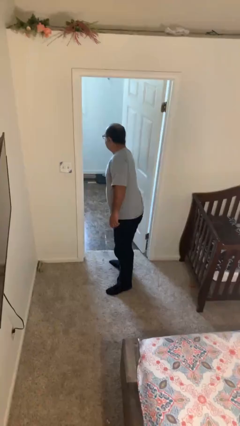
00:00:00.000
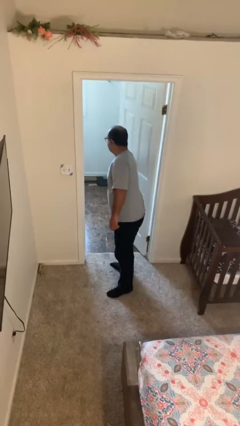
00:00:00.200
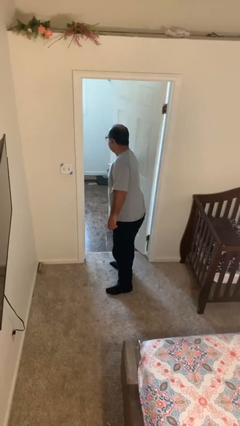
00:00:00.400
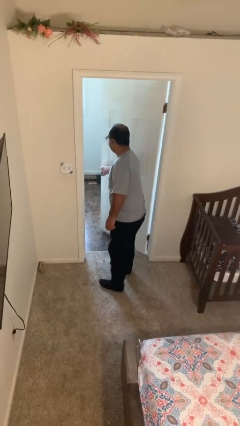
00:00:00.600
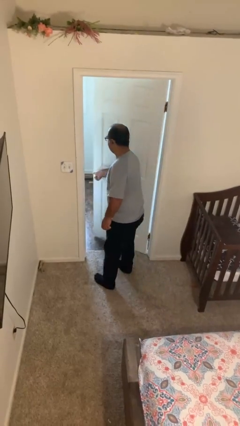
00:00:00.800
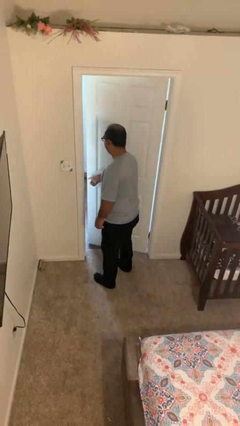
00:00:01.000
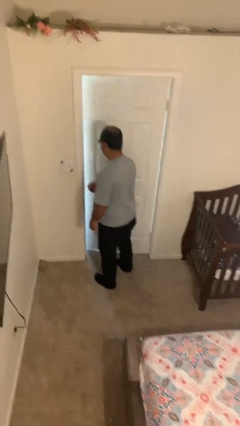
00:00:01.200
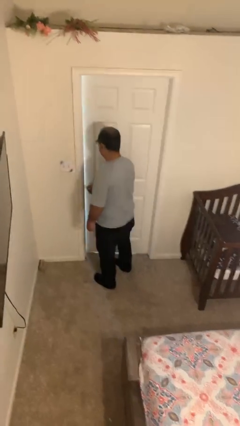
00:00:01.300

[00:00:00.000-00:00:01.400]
person closes facility door

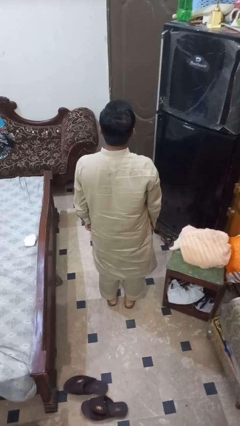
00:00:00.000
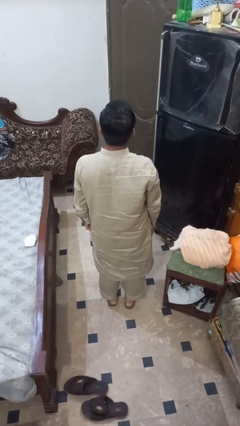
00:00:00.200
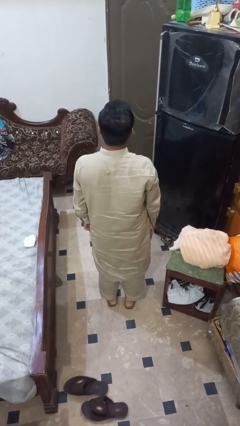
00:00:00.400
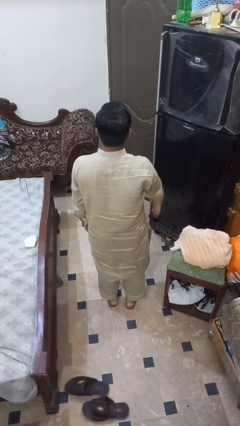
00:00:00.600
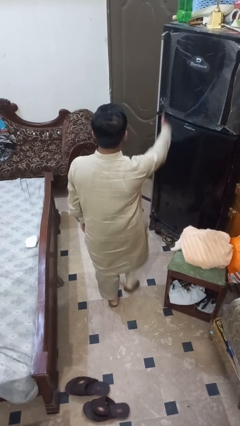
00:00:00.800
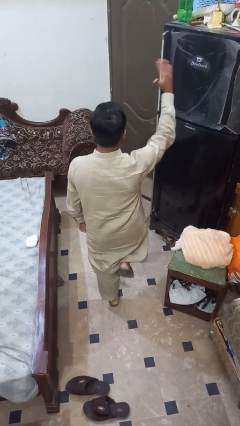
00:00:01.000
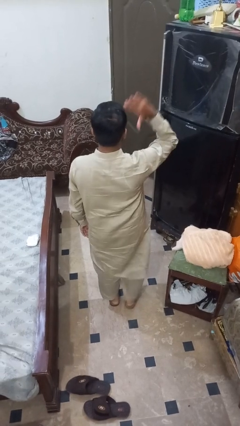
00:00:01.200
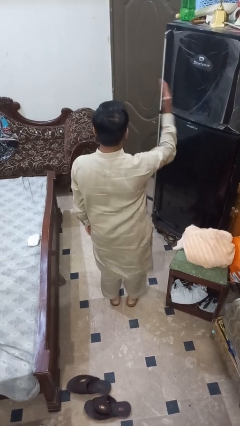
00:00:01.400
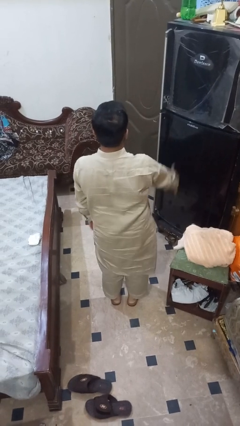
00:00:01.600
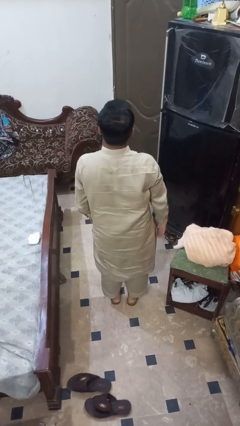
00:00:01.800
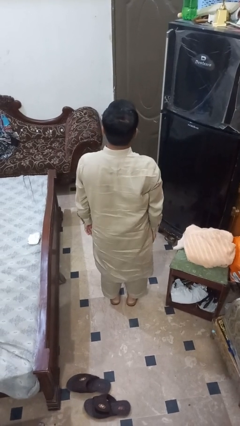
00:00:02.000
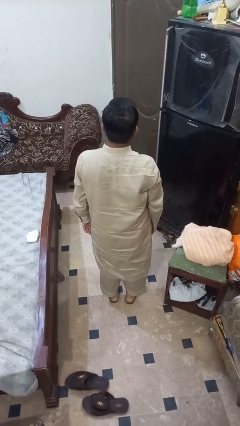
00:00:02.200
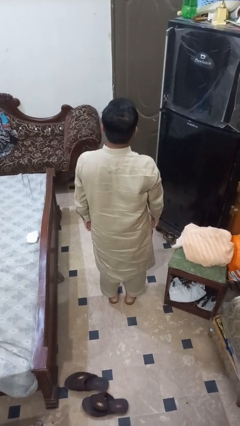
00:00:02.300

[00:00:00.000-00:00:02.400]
person salutes

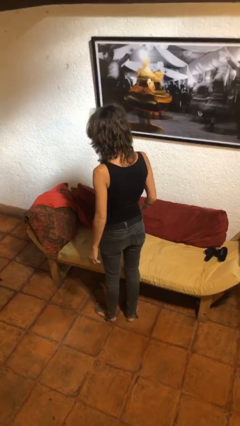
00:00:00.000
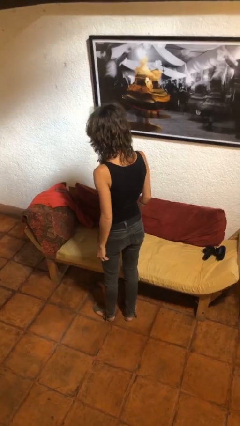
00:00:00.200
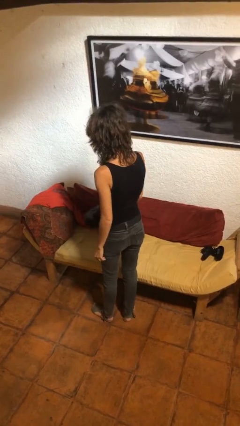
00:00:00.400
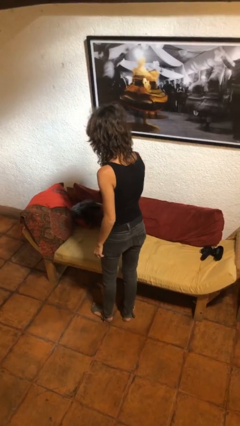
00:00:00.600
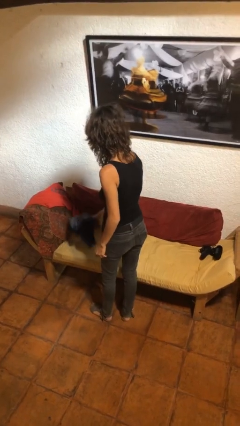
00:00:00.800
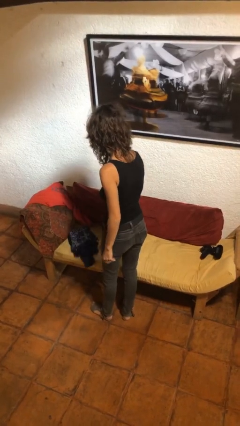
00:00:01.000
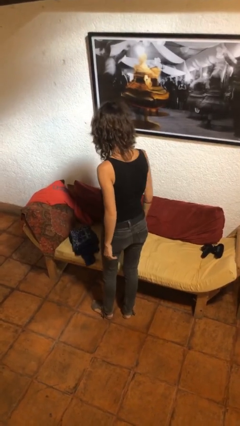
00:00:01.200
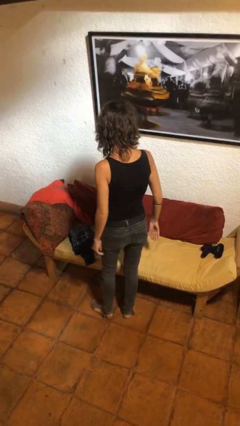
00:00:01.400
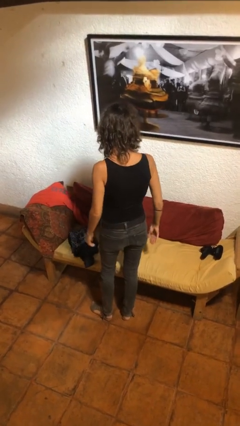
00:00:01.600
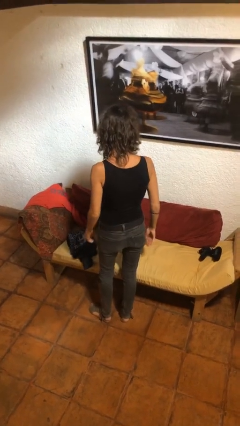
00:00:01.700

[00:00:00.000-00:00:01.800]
person puts down object on couch

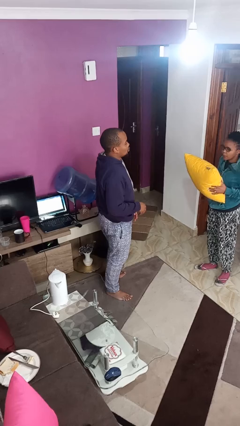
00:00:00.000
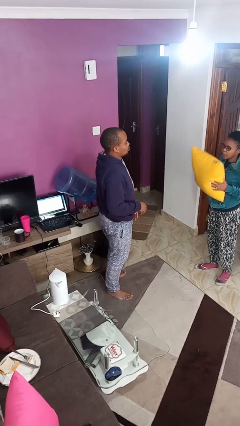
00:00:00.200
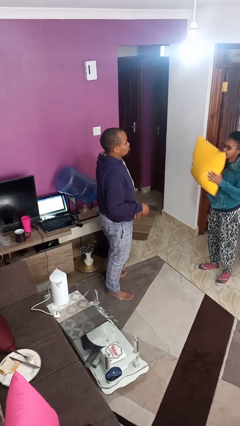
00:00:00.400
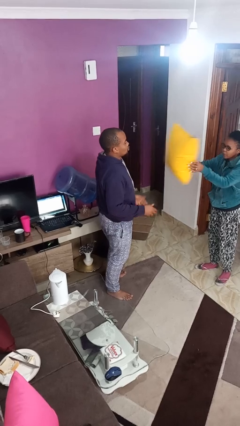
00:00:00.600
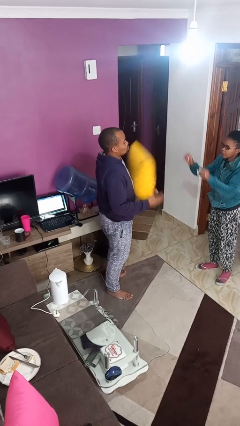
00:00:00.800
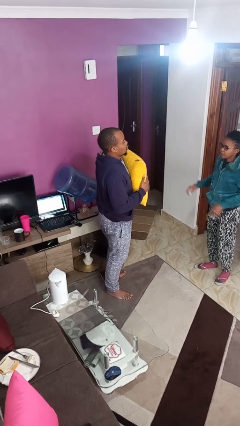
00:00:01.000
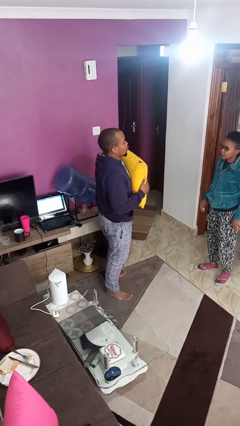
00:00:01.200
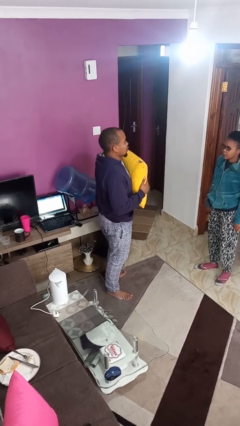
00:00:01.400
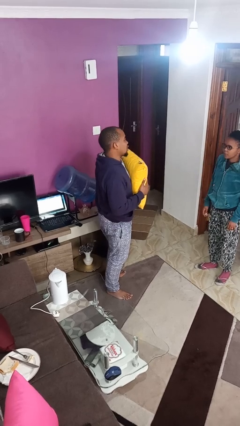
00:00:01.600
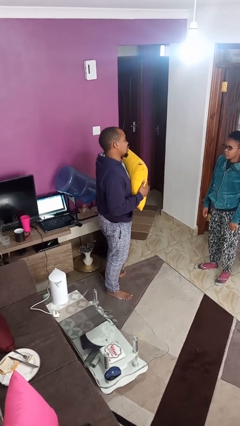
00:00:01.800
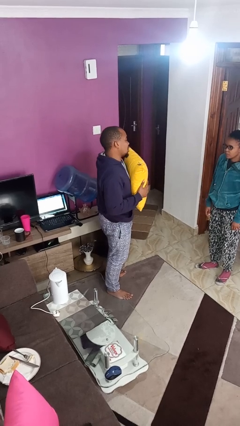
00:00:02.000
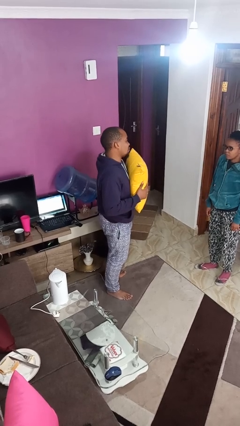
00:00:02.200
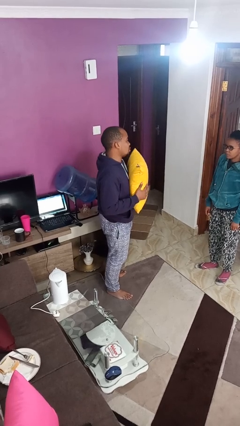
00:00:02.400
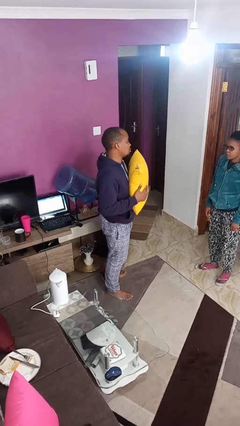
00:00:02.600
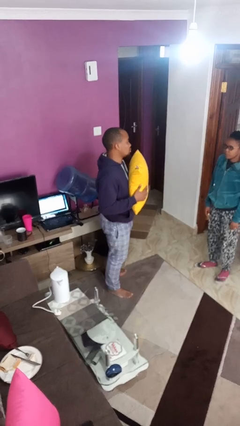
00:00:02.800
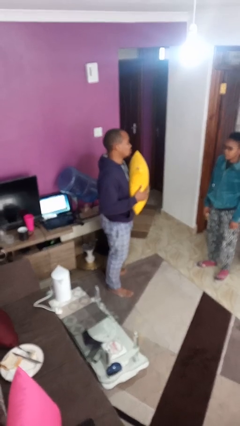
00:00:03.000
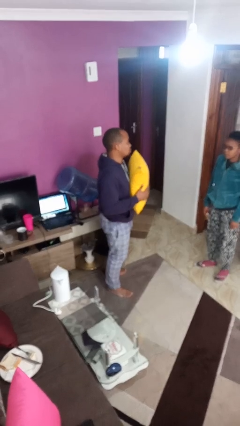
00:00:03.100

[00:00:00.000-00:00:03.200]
person catches object from person

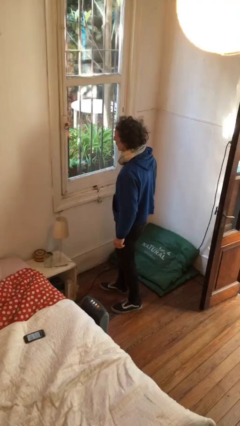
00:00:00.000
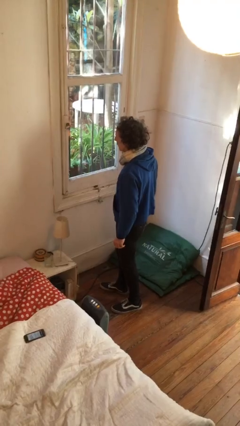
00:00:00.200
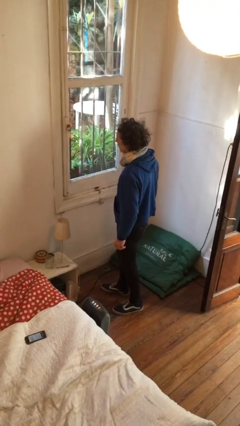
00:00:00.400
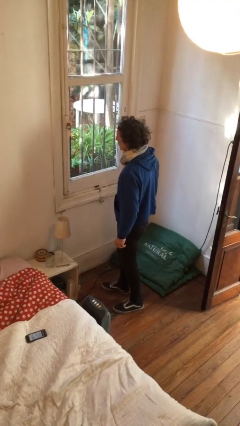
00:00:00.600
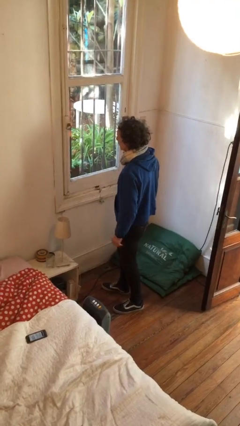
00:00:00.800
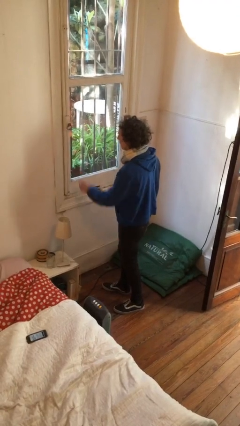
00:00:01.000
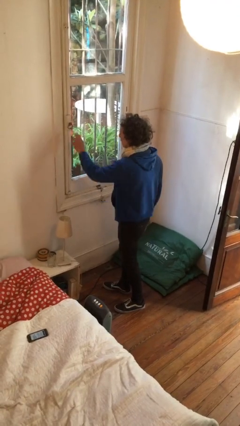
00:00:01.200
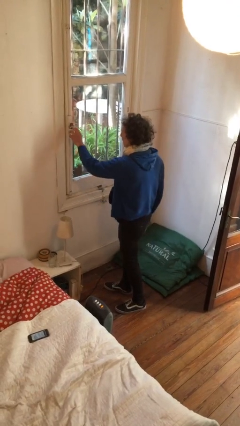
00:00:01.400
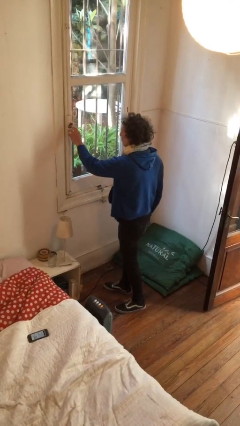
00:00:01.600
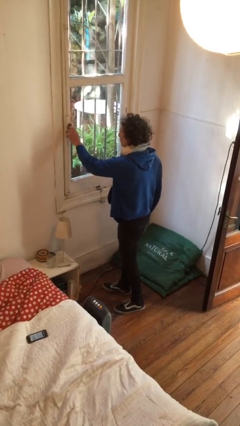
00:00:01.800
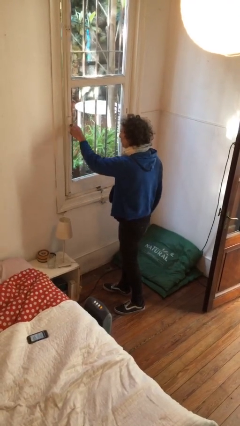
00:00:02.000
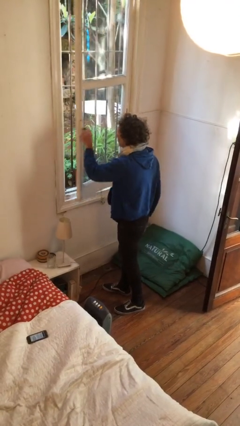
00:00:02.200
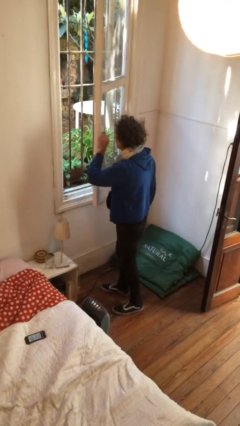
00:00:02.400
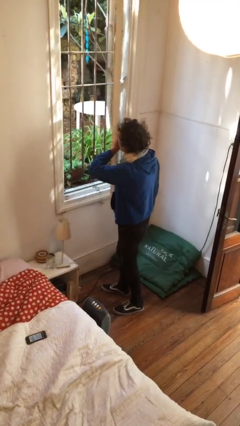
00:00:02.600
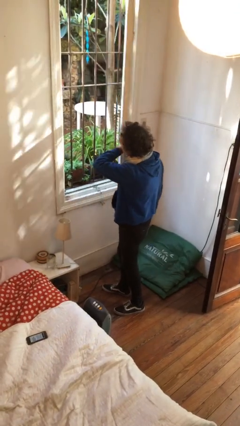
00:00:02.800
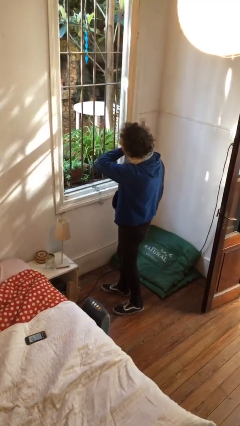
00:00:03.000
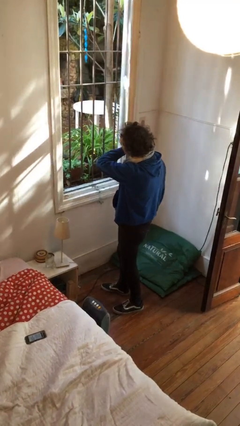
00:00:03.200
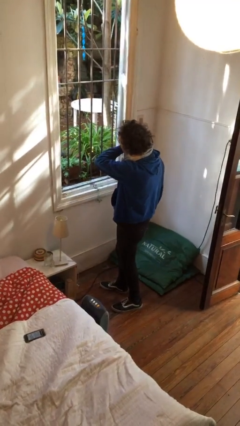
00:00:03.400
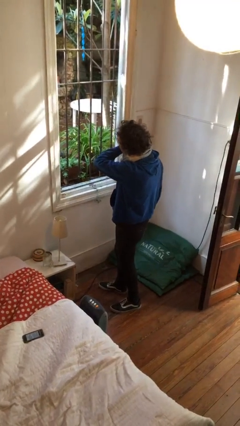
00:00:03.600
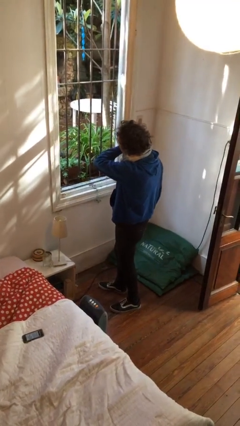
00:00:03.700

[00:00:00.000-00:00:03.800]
person opens home window

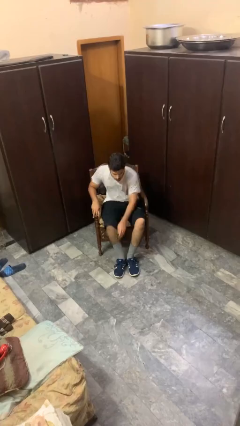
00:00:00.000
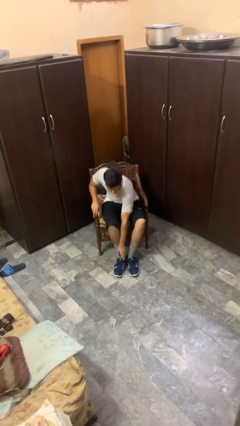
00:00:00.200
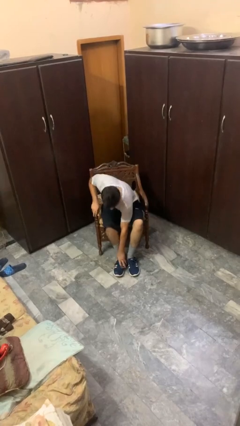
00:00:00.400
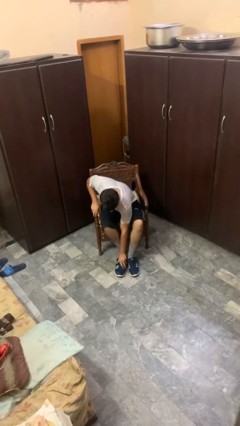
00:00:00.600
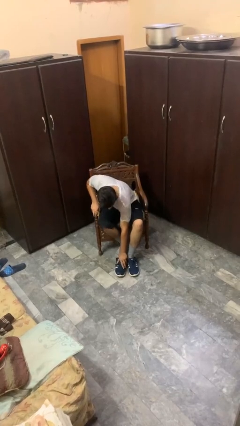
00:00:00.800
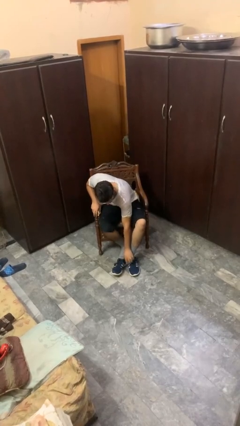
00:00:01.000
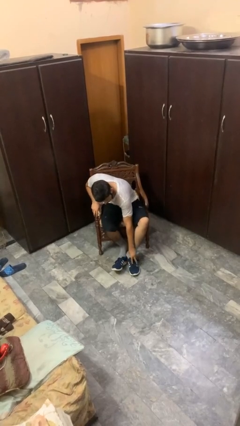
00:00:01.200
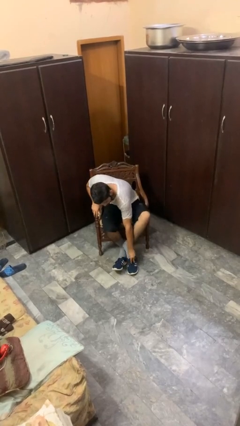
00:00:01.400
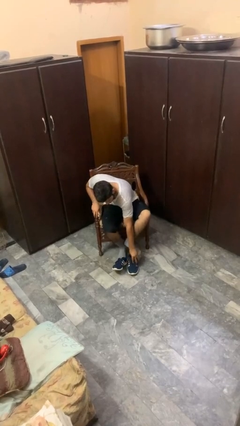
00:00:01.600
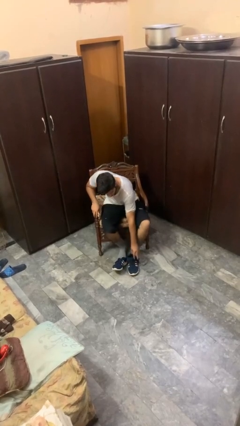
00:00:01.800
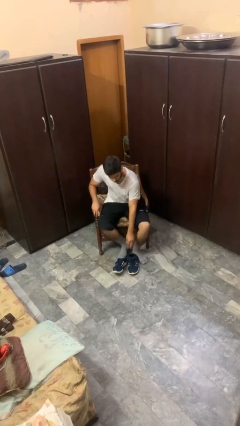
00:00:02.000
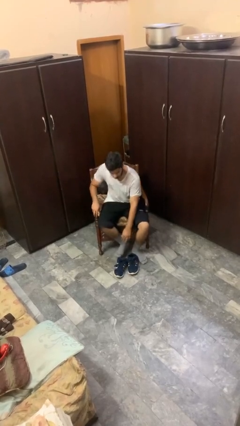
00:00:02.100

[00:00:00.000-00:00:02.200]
person takes off shoes

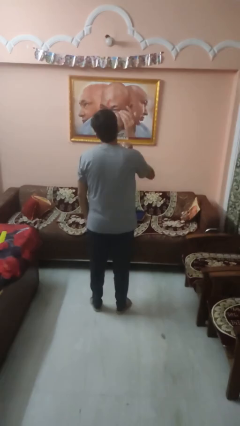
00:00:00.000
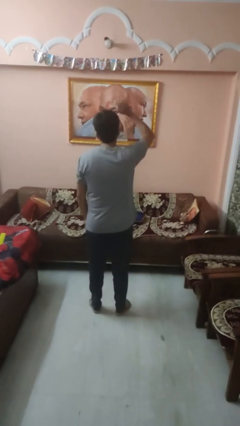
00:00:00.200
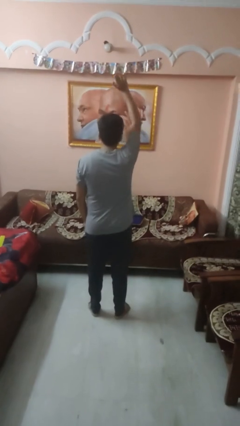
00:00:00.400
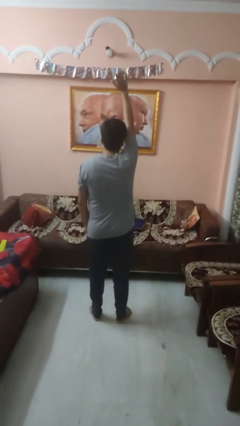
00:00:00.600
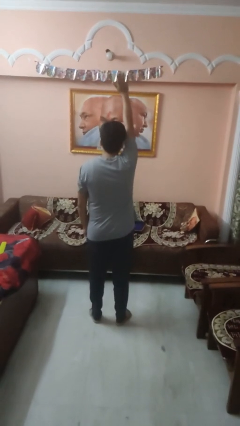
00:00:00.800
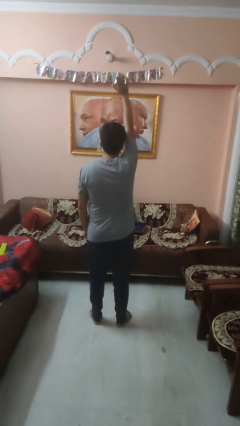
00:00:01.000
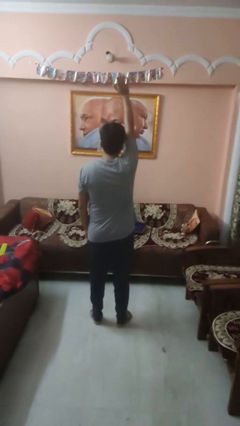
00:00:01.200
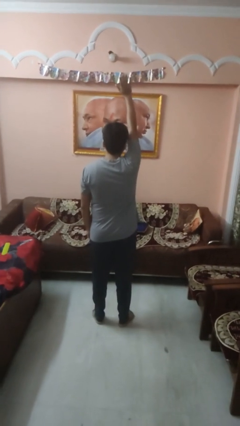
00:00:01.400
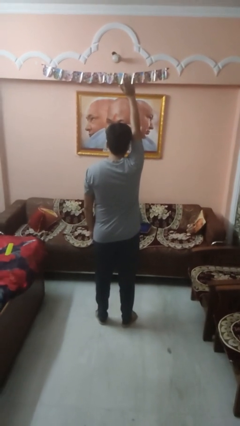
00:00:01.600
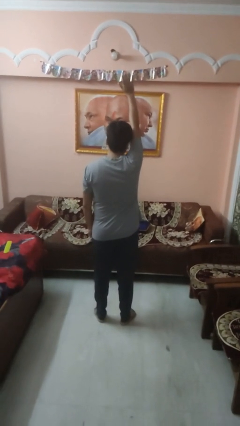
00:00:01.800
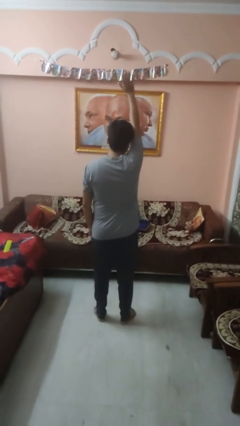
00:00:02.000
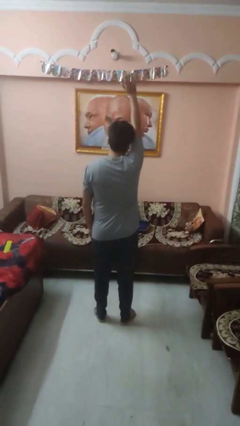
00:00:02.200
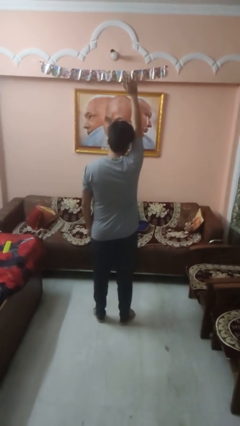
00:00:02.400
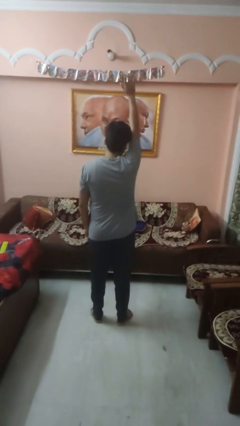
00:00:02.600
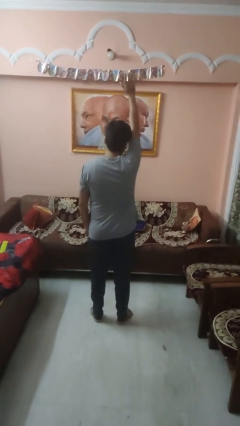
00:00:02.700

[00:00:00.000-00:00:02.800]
person gestures raise hand
